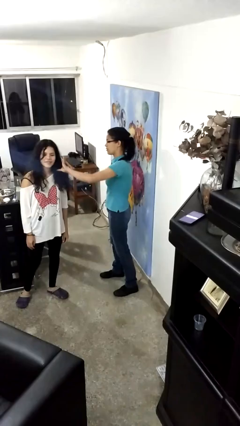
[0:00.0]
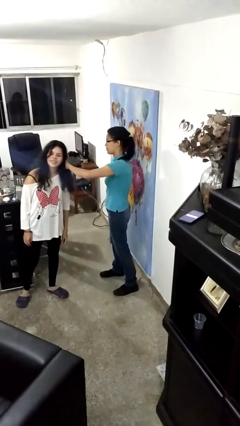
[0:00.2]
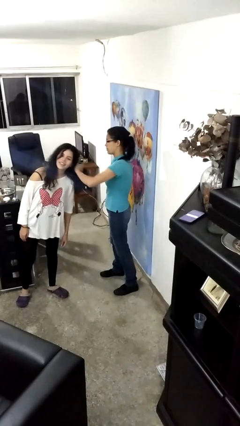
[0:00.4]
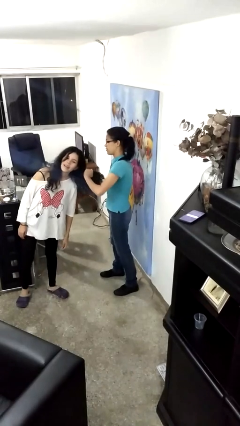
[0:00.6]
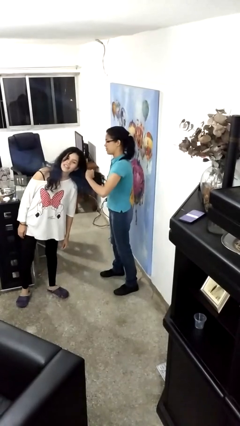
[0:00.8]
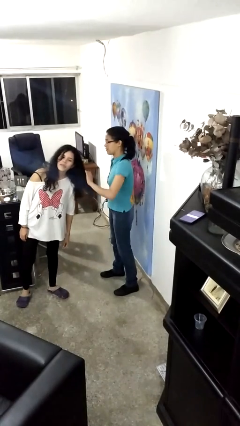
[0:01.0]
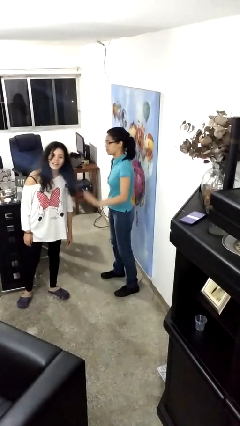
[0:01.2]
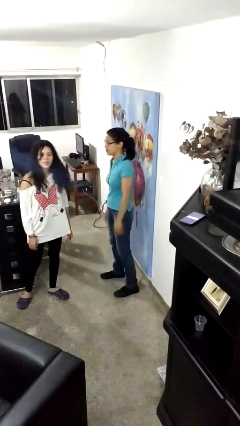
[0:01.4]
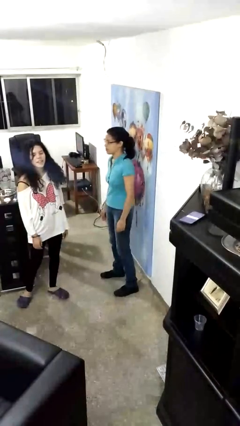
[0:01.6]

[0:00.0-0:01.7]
person grabs person by hair

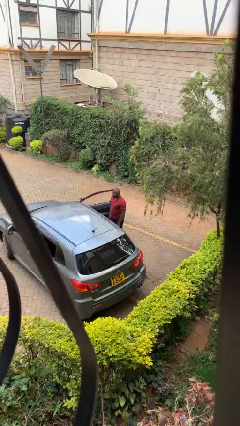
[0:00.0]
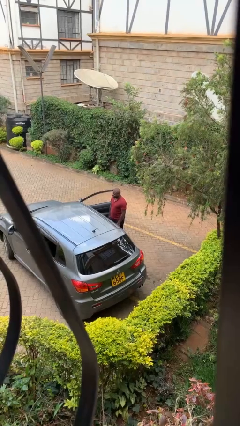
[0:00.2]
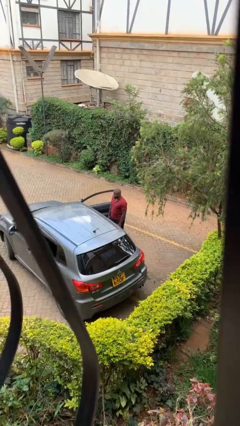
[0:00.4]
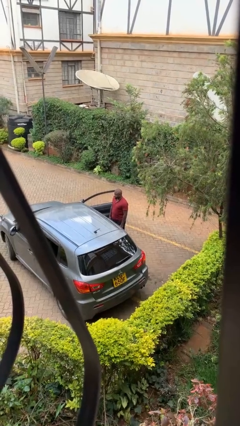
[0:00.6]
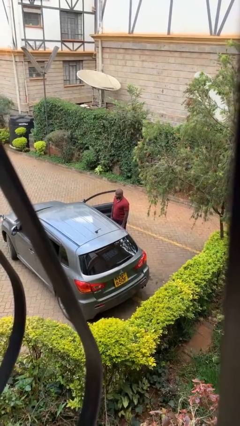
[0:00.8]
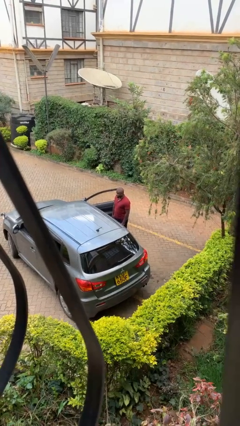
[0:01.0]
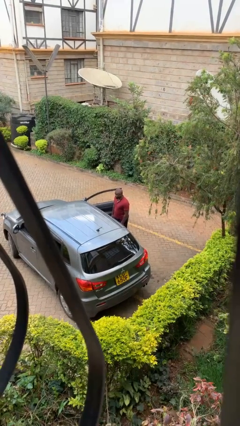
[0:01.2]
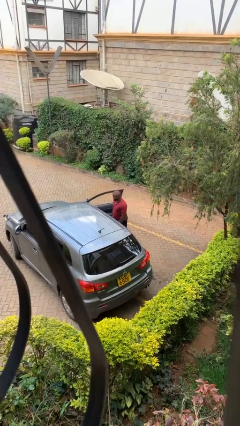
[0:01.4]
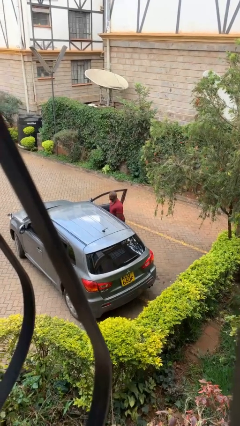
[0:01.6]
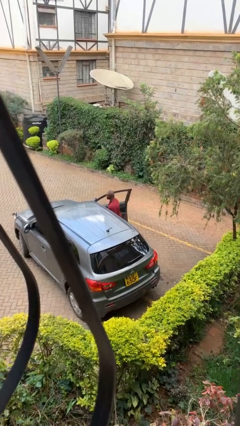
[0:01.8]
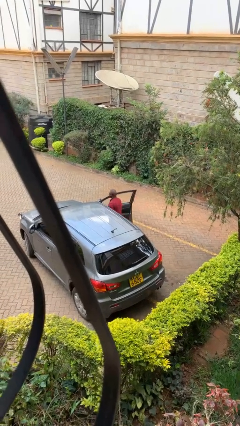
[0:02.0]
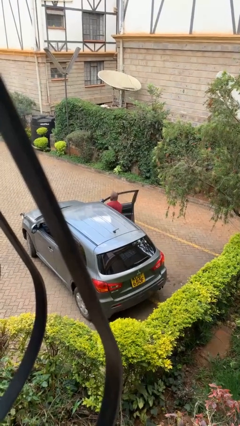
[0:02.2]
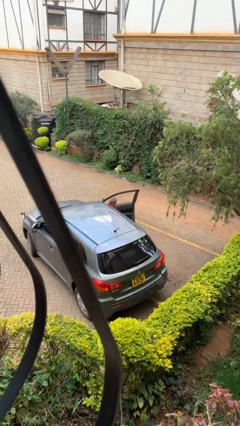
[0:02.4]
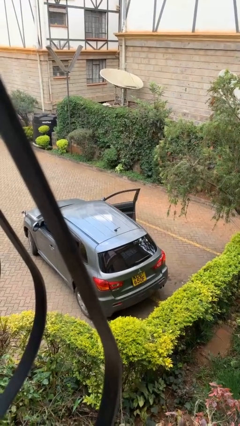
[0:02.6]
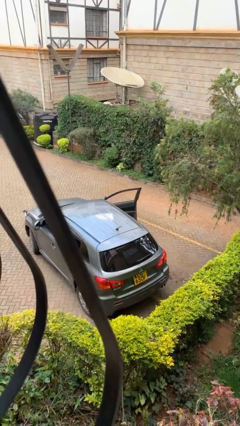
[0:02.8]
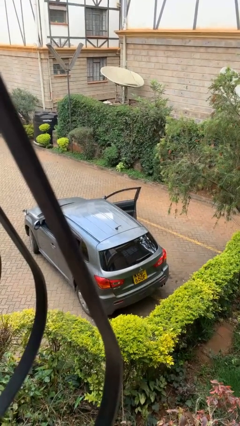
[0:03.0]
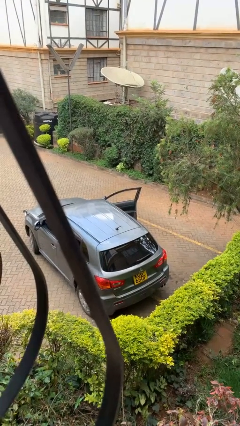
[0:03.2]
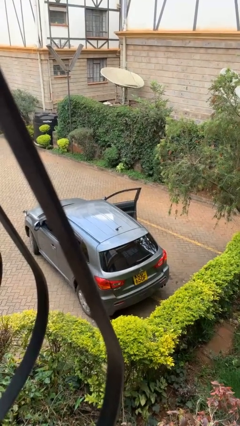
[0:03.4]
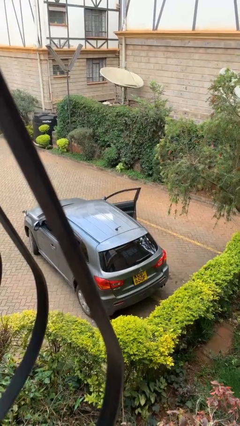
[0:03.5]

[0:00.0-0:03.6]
person enters car

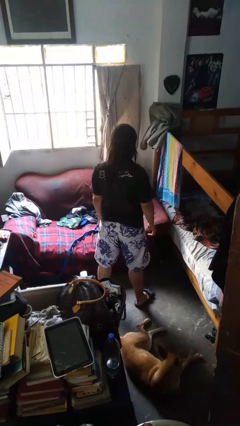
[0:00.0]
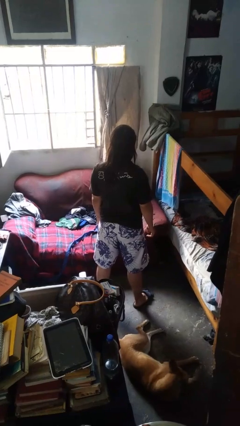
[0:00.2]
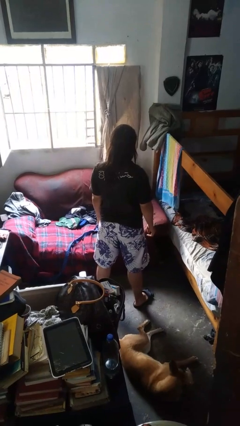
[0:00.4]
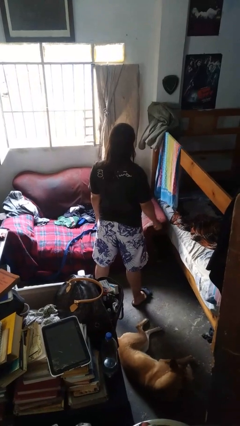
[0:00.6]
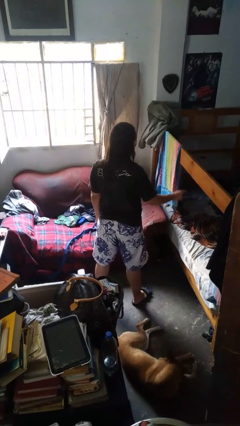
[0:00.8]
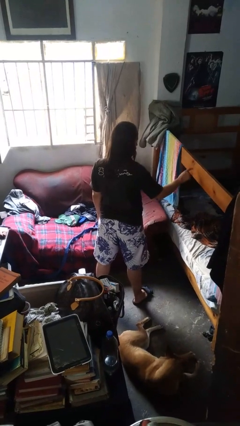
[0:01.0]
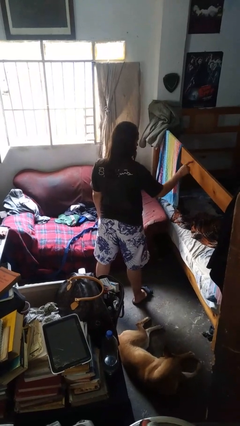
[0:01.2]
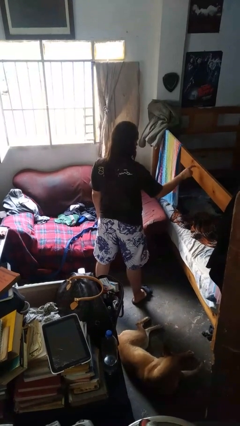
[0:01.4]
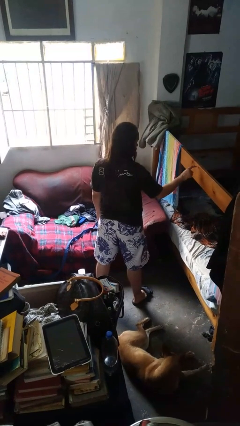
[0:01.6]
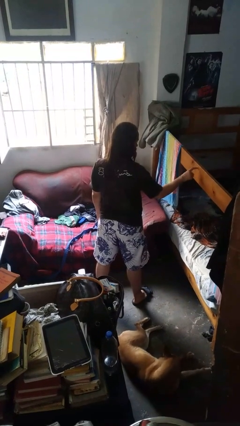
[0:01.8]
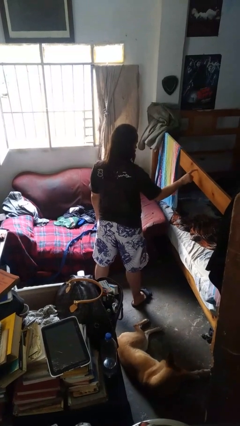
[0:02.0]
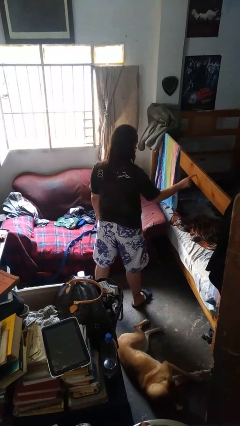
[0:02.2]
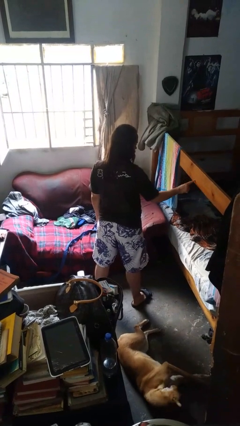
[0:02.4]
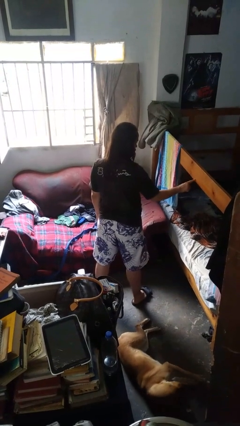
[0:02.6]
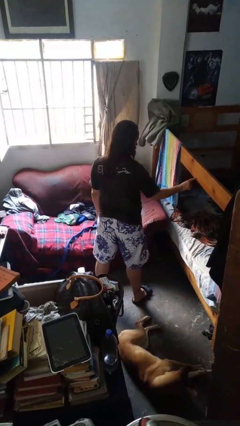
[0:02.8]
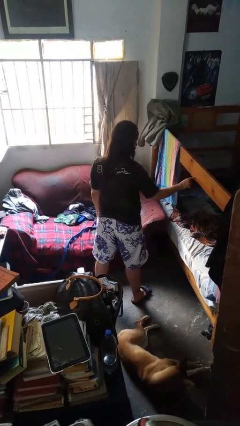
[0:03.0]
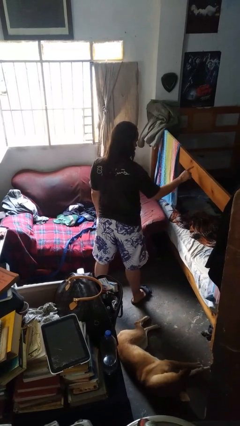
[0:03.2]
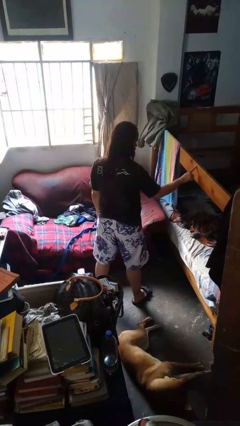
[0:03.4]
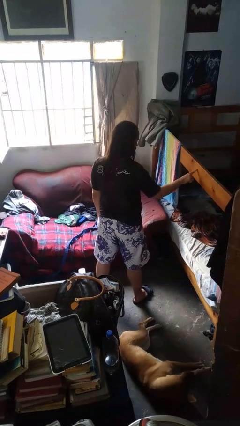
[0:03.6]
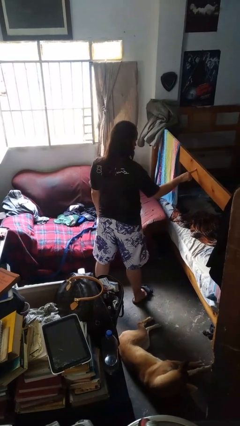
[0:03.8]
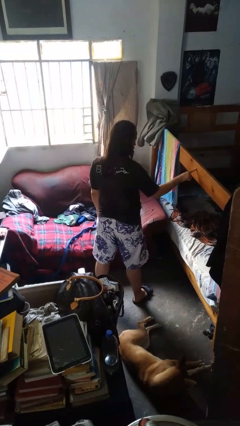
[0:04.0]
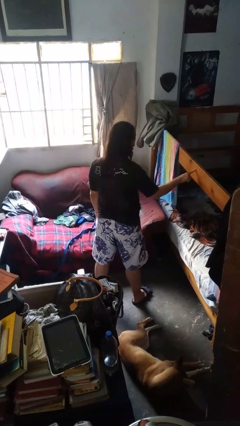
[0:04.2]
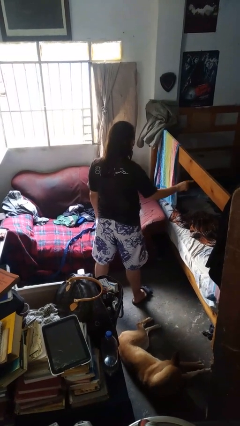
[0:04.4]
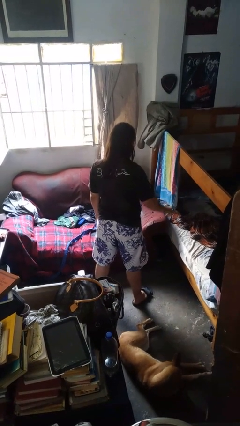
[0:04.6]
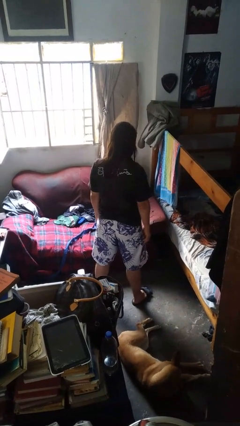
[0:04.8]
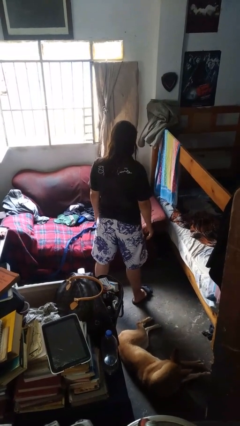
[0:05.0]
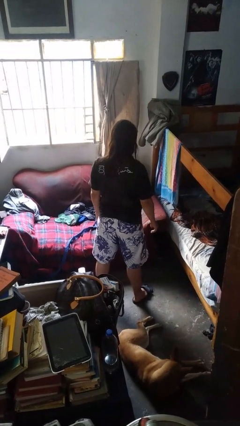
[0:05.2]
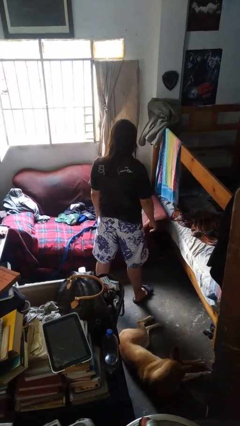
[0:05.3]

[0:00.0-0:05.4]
person taps object with finger

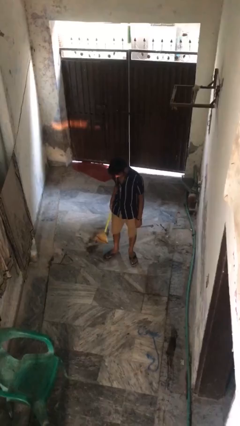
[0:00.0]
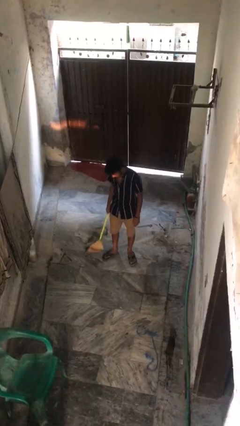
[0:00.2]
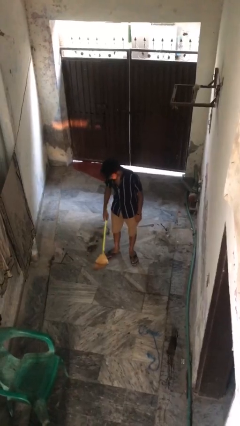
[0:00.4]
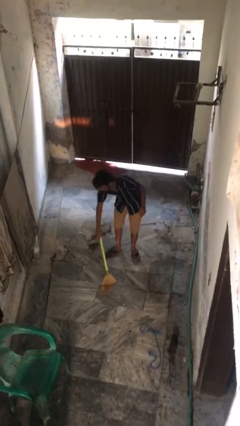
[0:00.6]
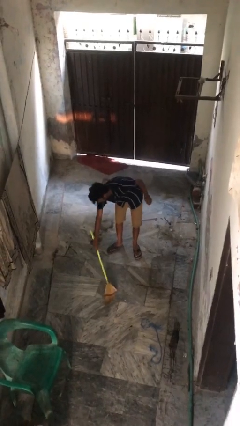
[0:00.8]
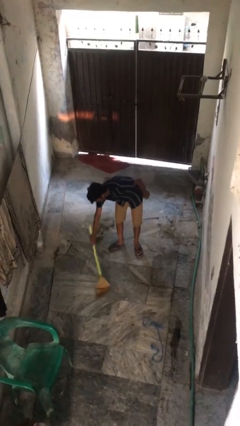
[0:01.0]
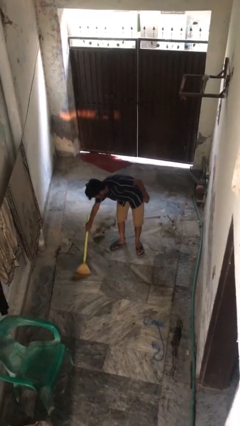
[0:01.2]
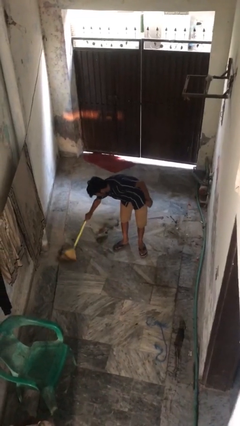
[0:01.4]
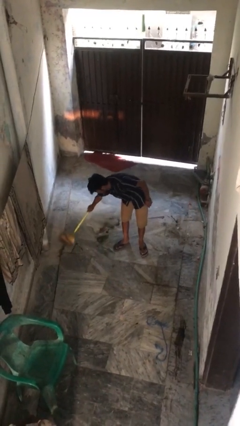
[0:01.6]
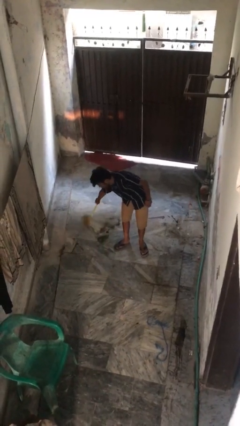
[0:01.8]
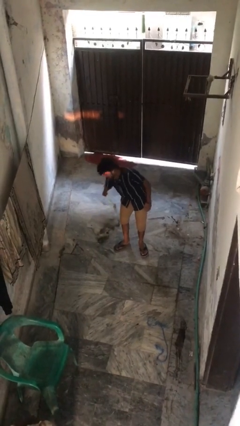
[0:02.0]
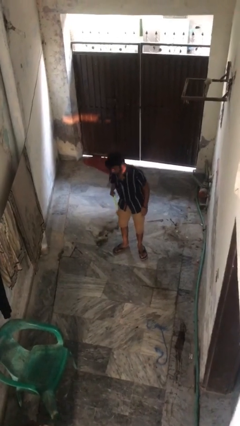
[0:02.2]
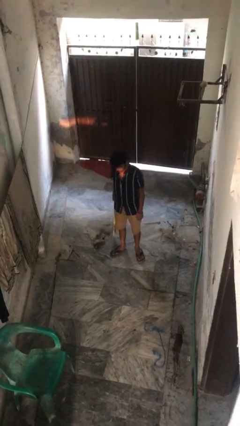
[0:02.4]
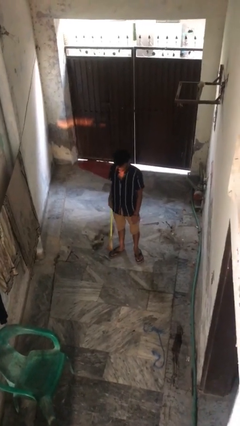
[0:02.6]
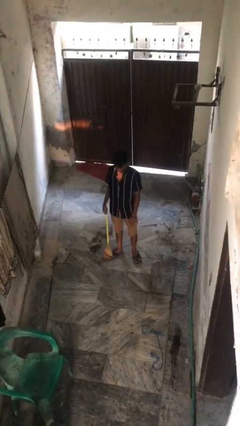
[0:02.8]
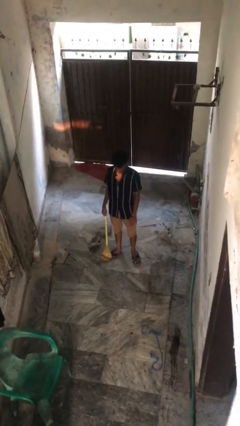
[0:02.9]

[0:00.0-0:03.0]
person sweeps floor

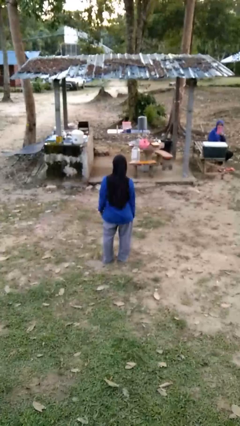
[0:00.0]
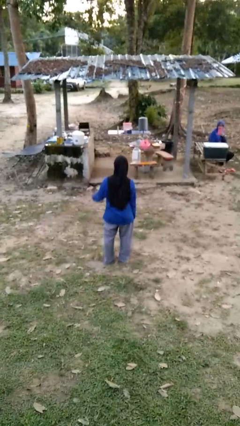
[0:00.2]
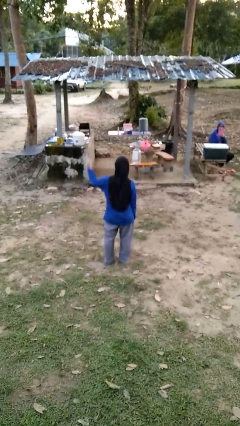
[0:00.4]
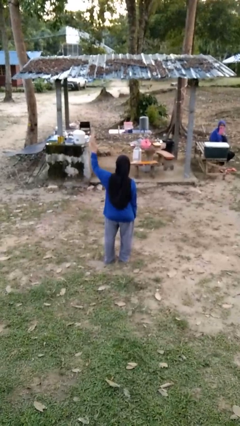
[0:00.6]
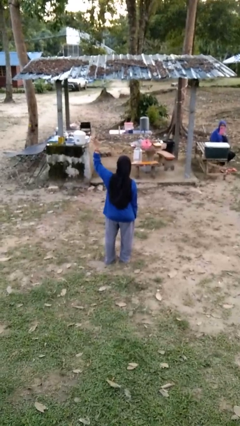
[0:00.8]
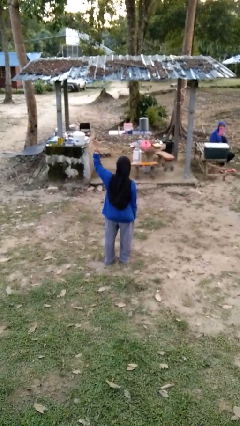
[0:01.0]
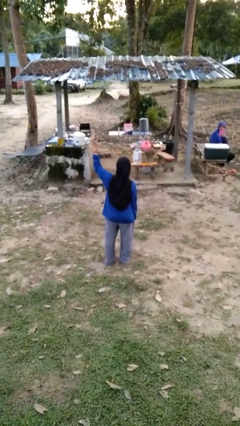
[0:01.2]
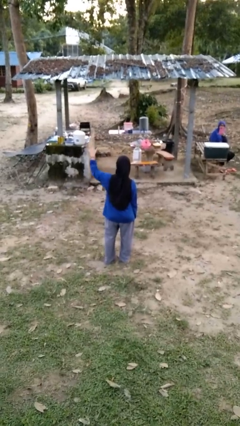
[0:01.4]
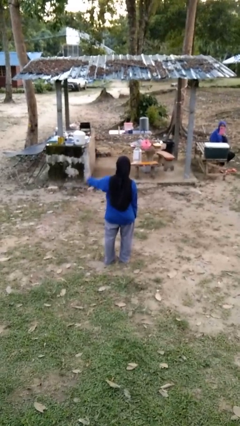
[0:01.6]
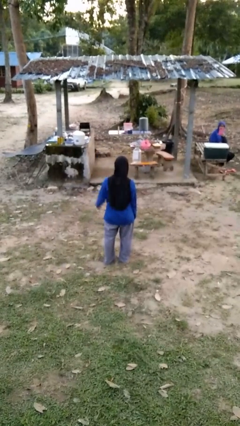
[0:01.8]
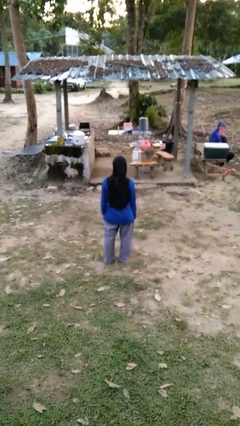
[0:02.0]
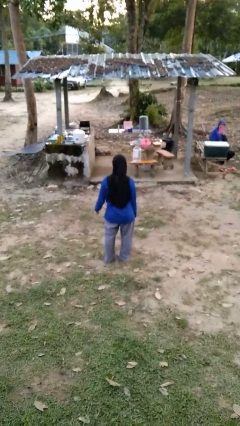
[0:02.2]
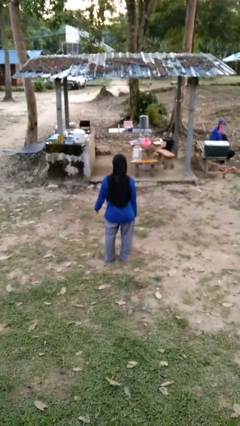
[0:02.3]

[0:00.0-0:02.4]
person gestures number five

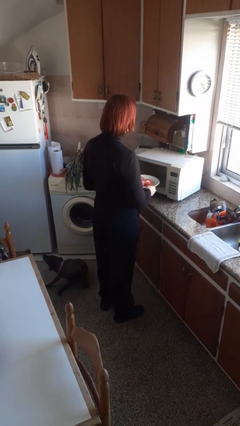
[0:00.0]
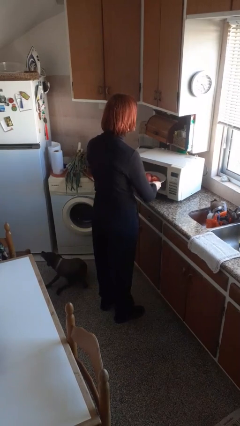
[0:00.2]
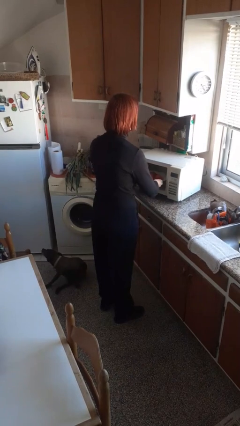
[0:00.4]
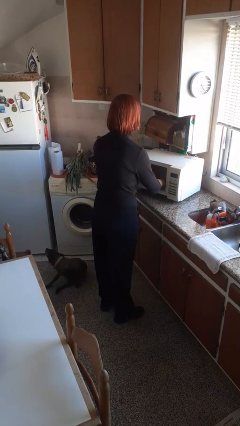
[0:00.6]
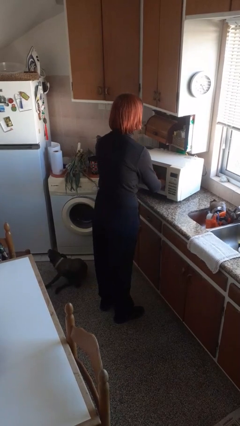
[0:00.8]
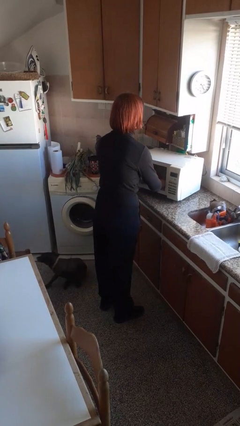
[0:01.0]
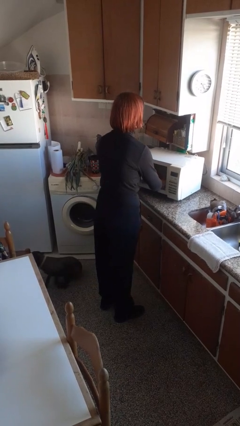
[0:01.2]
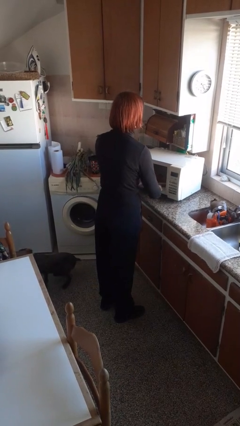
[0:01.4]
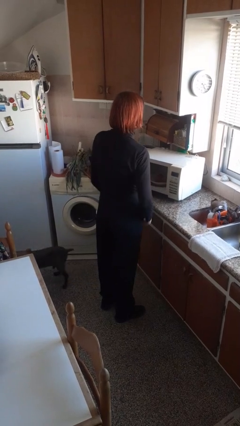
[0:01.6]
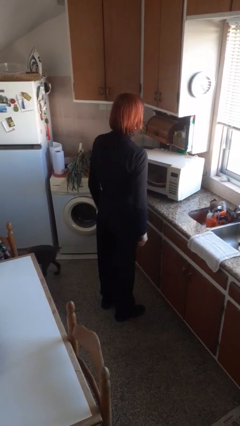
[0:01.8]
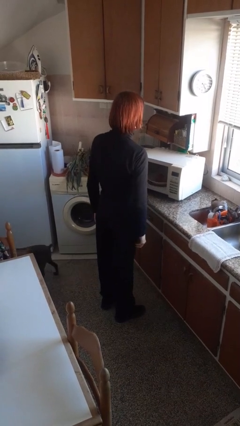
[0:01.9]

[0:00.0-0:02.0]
person puts object into microwave
